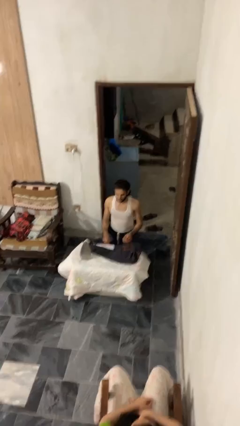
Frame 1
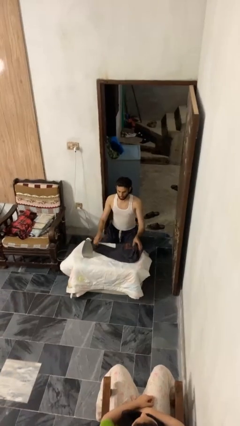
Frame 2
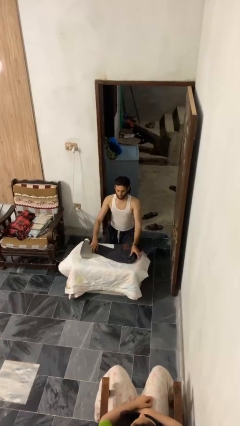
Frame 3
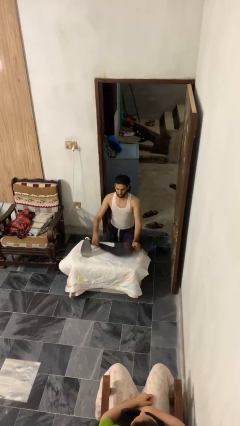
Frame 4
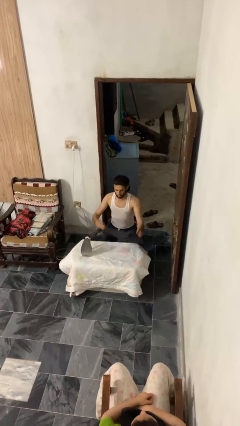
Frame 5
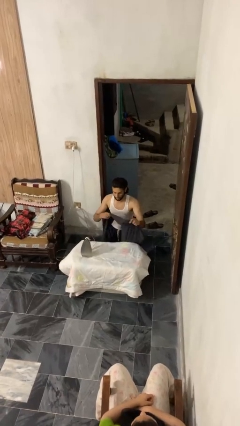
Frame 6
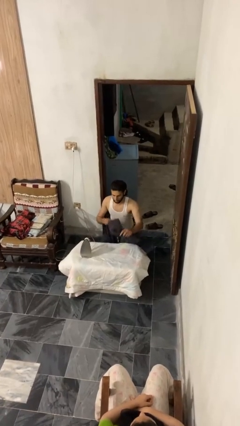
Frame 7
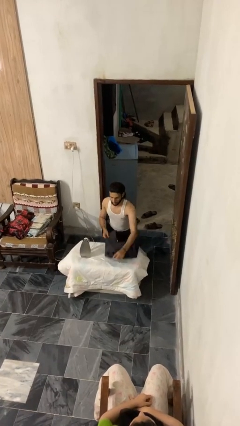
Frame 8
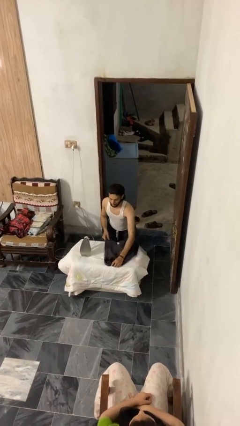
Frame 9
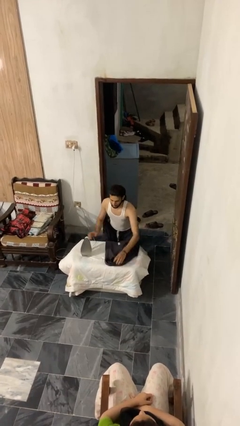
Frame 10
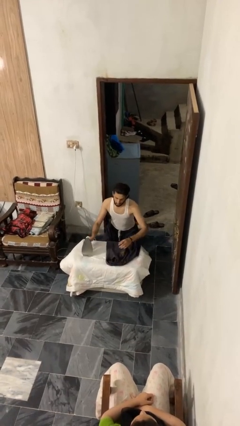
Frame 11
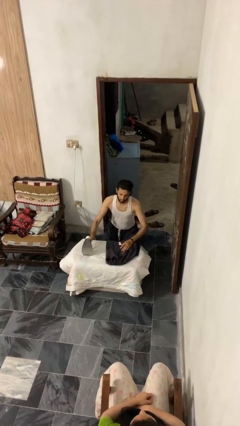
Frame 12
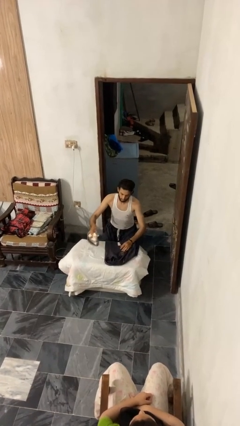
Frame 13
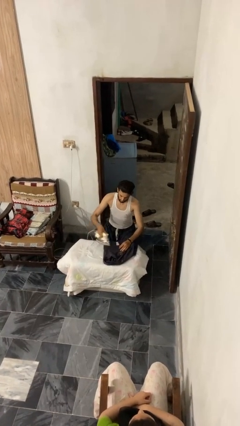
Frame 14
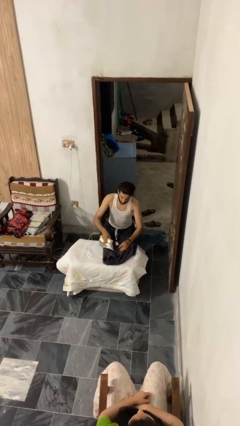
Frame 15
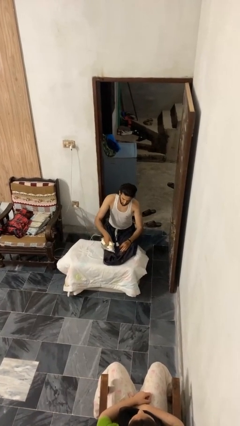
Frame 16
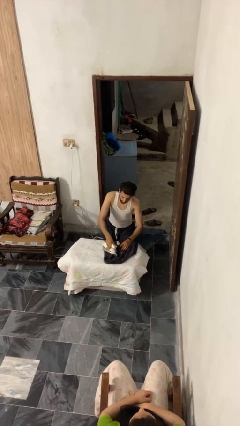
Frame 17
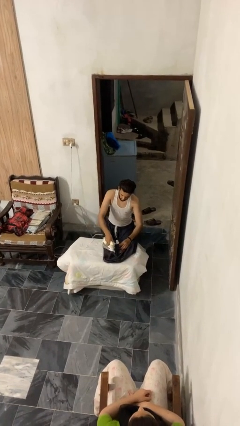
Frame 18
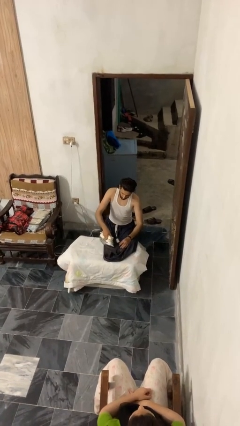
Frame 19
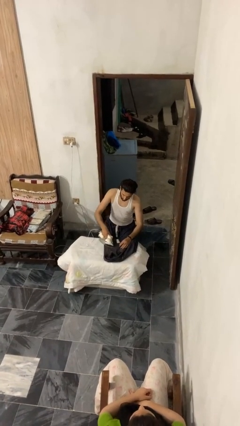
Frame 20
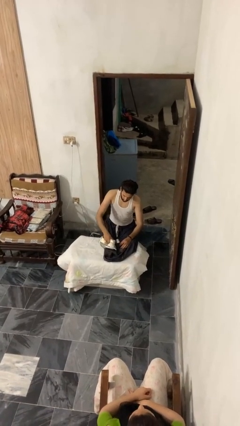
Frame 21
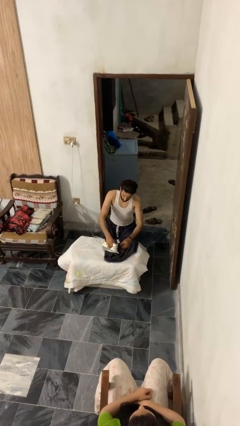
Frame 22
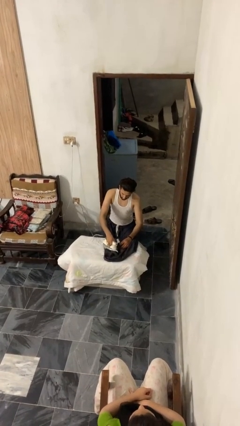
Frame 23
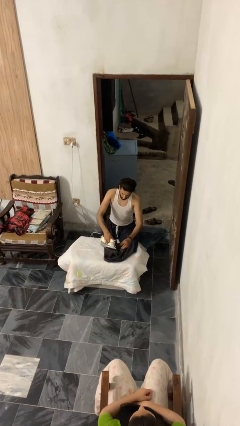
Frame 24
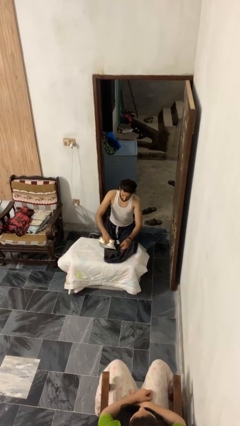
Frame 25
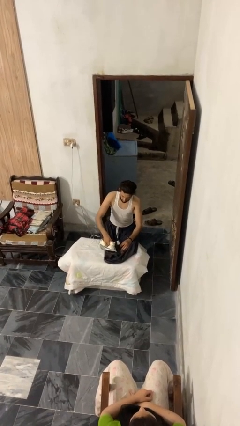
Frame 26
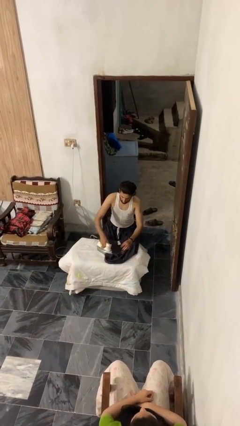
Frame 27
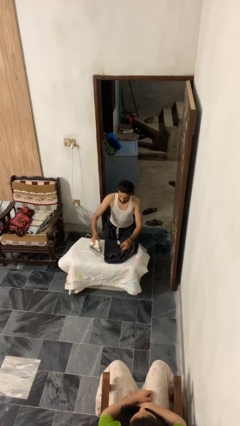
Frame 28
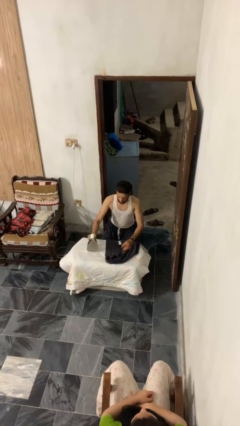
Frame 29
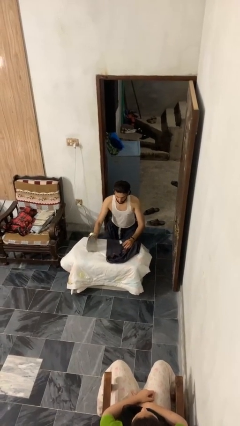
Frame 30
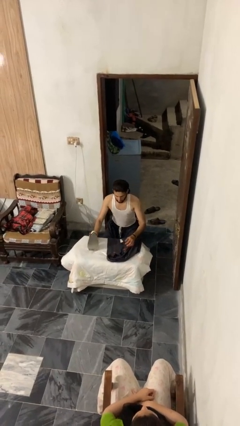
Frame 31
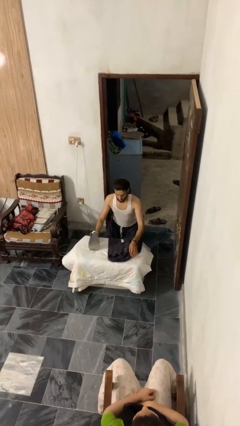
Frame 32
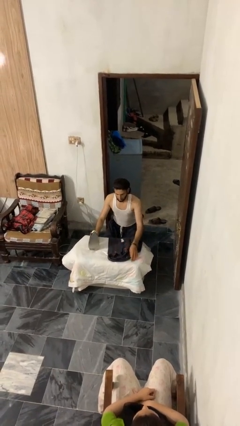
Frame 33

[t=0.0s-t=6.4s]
person irons clothes

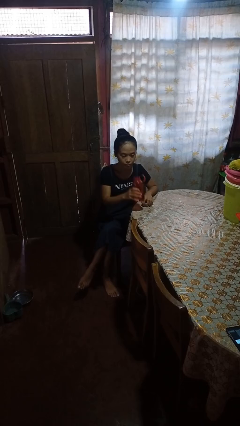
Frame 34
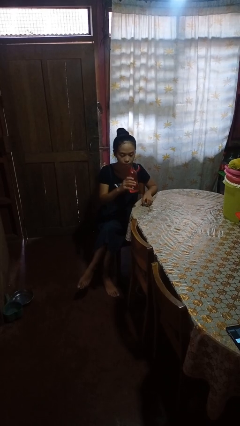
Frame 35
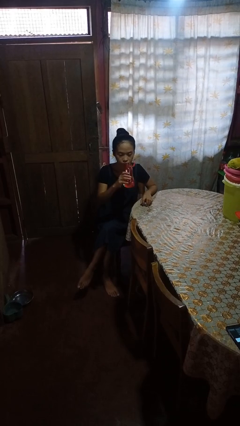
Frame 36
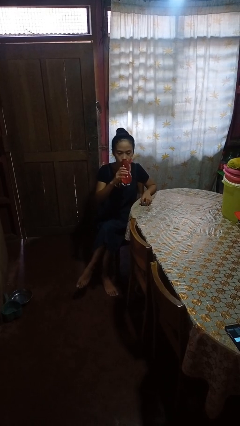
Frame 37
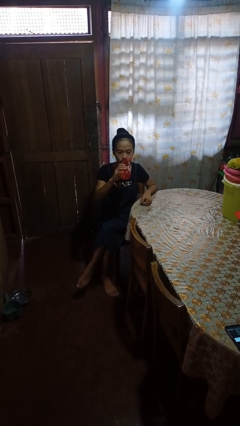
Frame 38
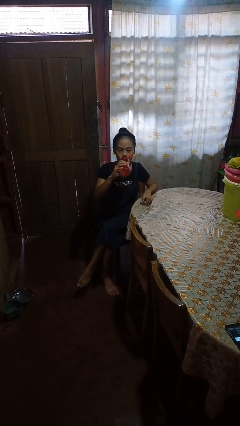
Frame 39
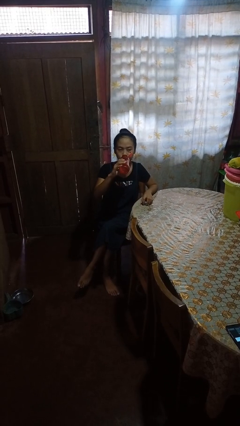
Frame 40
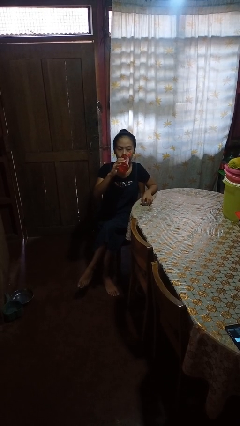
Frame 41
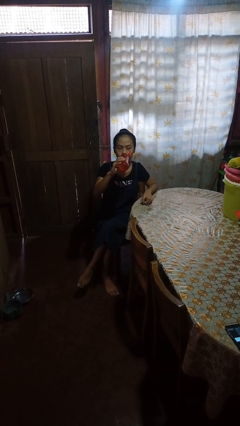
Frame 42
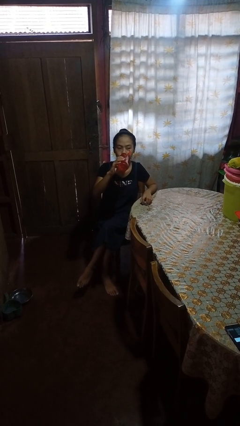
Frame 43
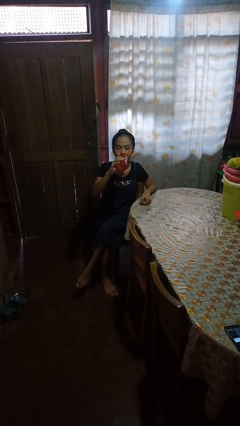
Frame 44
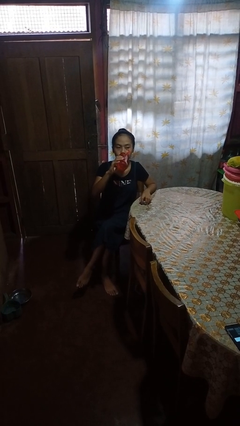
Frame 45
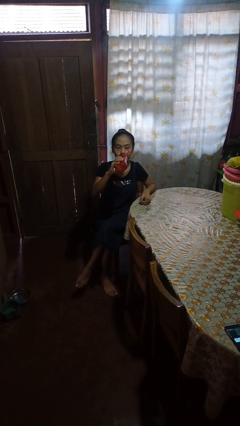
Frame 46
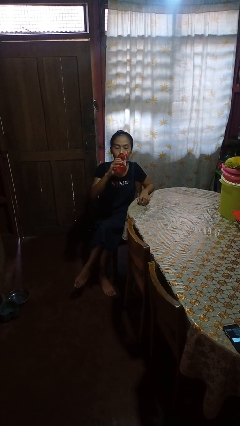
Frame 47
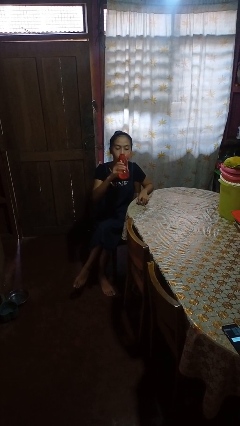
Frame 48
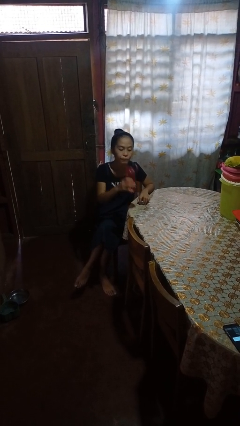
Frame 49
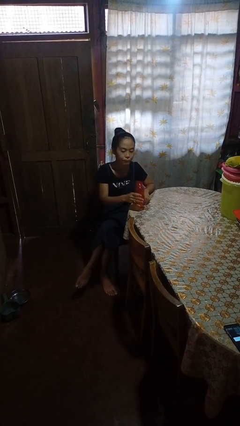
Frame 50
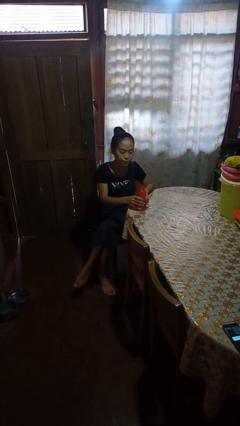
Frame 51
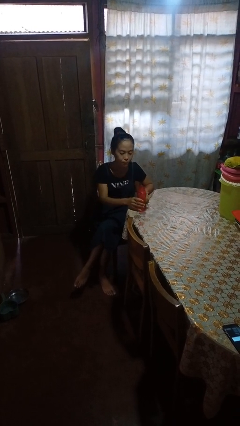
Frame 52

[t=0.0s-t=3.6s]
person drinks from bottle

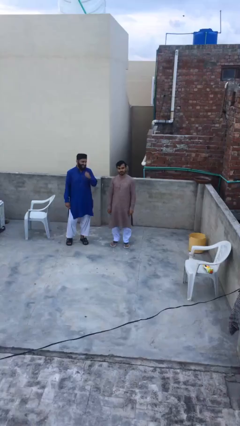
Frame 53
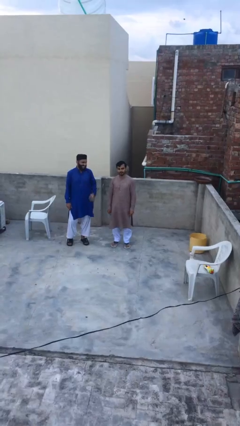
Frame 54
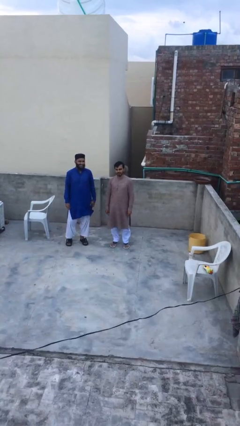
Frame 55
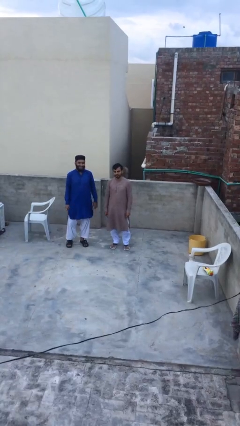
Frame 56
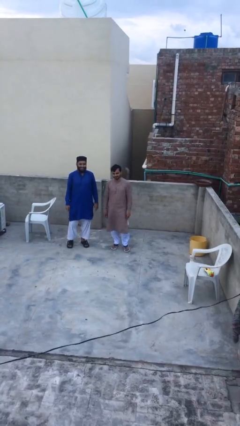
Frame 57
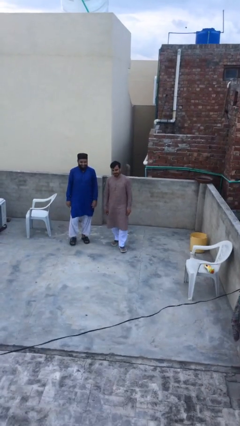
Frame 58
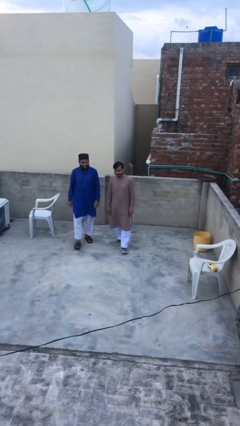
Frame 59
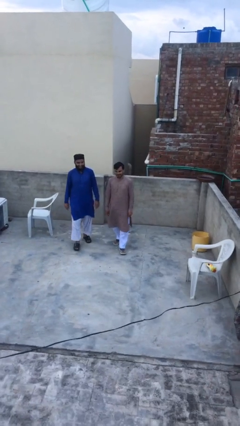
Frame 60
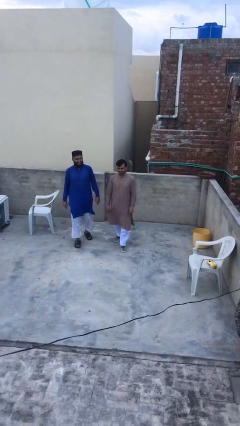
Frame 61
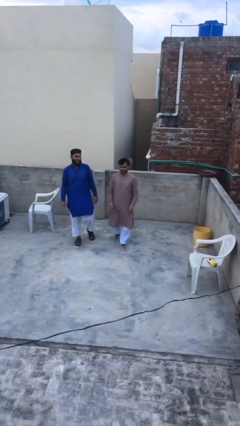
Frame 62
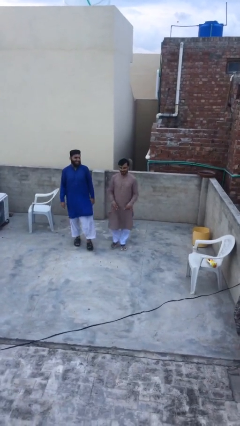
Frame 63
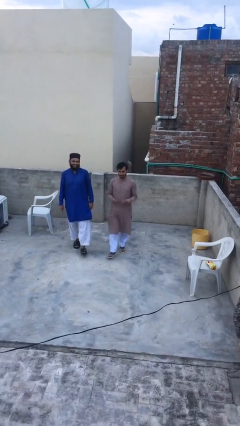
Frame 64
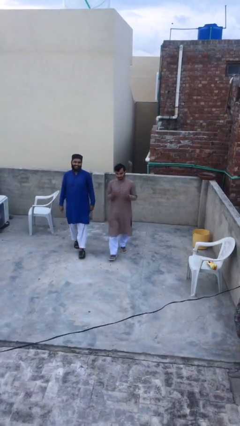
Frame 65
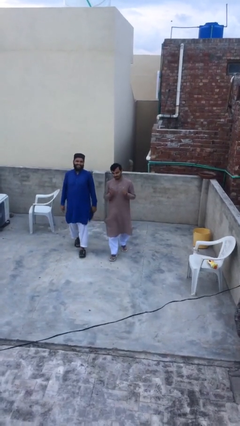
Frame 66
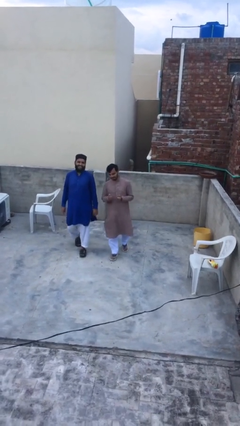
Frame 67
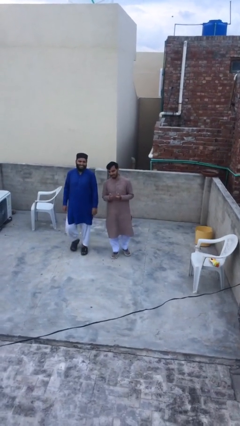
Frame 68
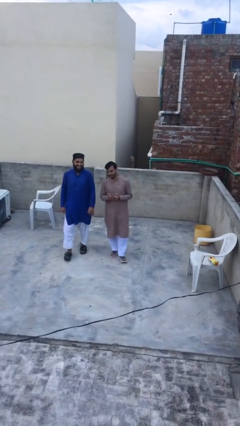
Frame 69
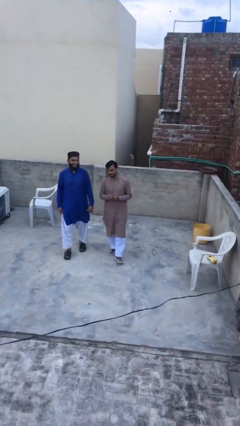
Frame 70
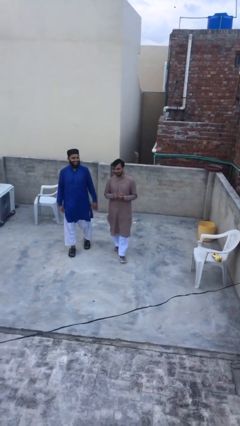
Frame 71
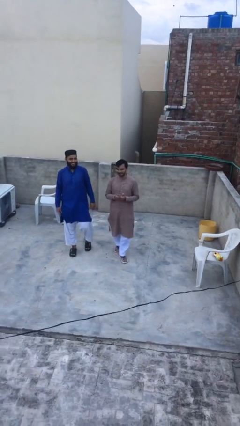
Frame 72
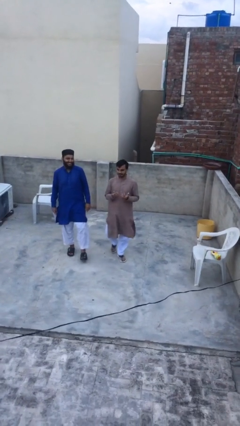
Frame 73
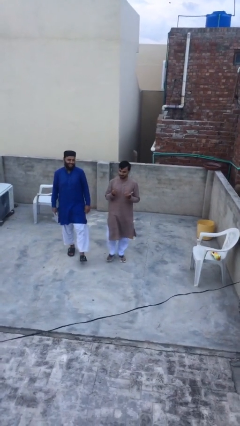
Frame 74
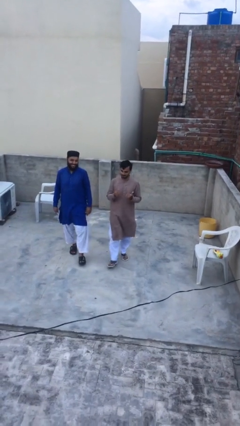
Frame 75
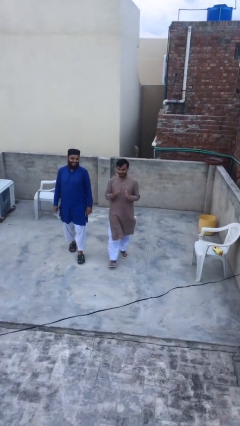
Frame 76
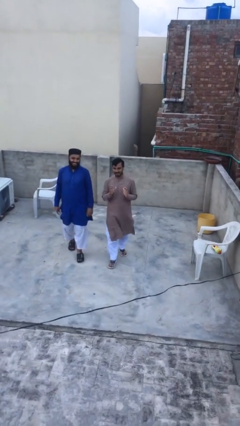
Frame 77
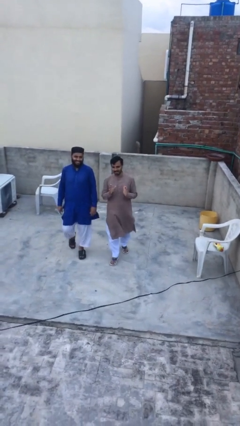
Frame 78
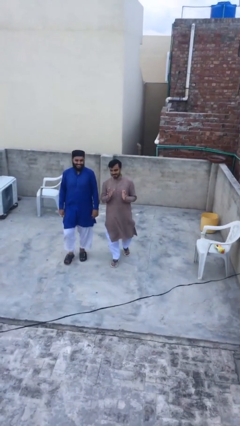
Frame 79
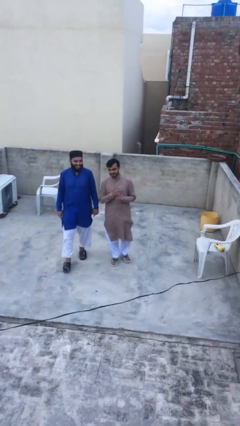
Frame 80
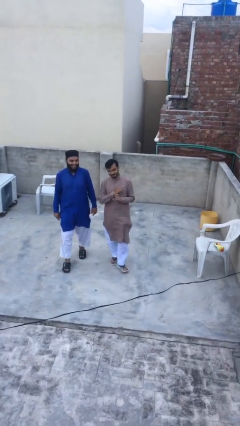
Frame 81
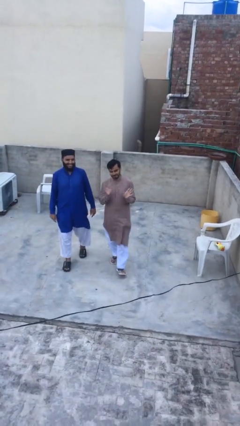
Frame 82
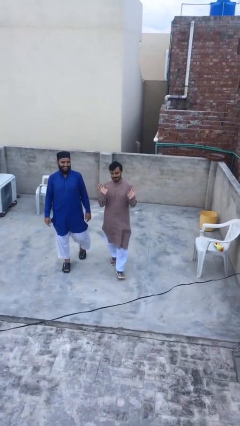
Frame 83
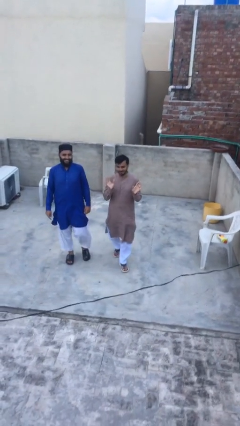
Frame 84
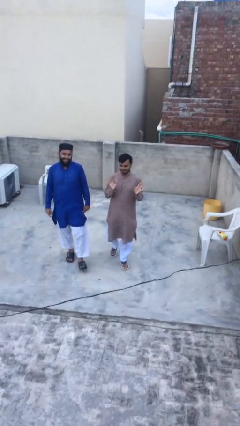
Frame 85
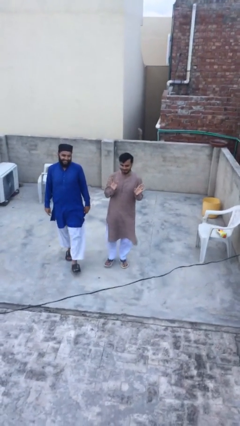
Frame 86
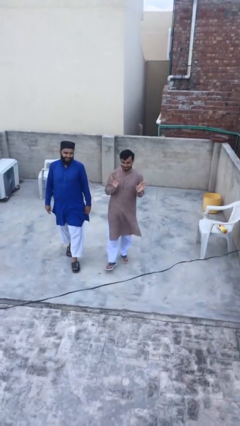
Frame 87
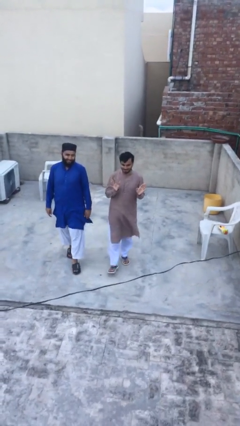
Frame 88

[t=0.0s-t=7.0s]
person talks to person

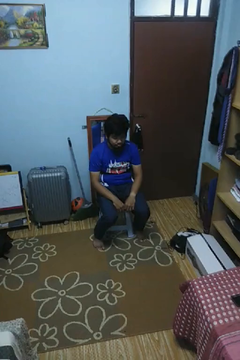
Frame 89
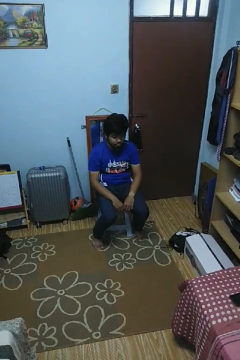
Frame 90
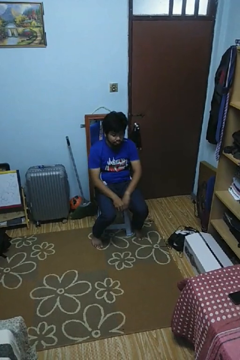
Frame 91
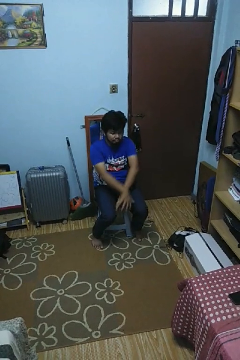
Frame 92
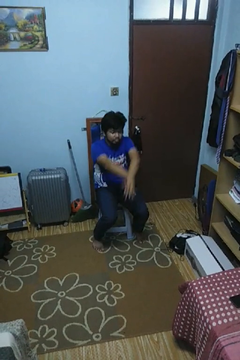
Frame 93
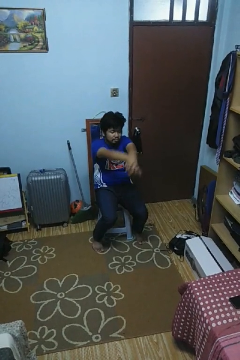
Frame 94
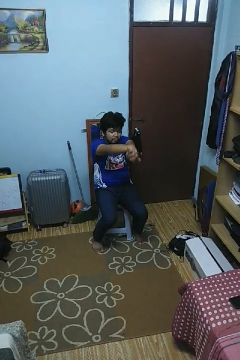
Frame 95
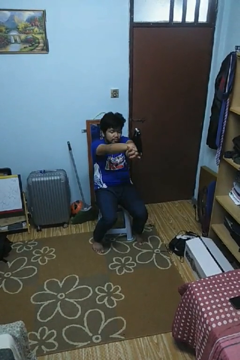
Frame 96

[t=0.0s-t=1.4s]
person crosses arms
